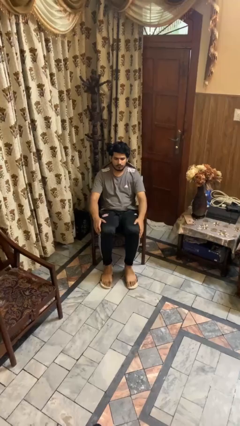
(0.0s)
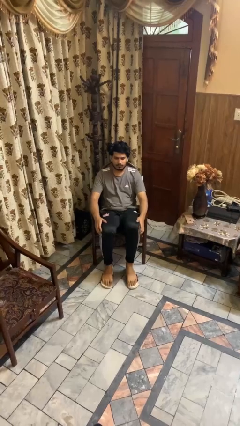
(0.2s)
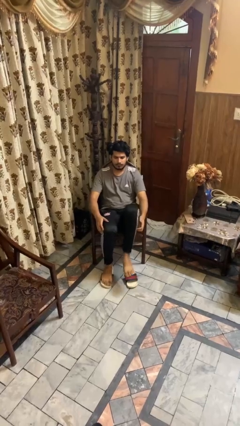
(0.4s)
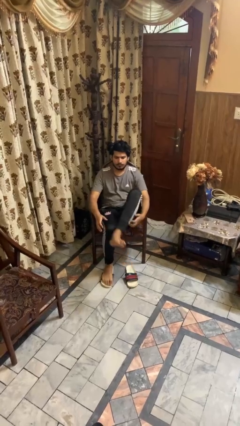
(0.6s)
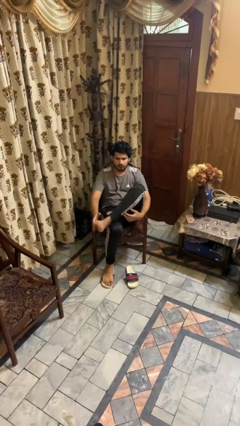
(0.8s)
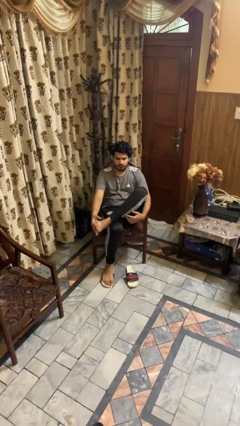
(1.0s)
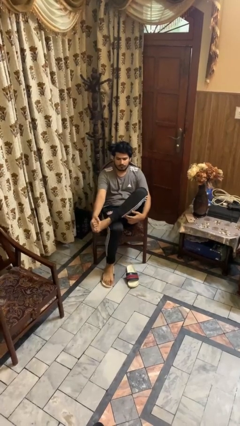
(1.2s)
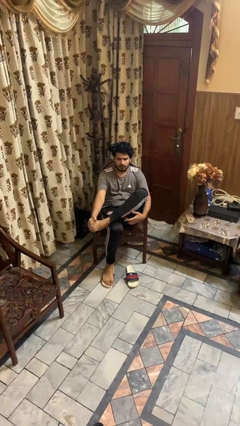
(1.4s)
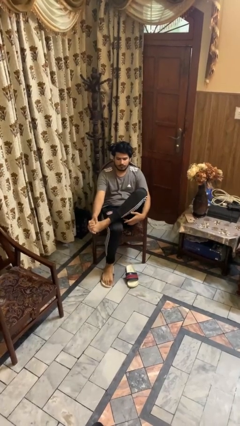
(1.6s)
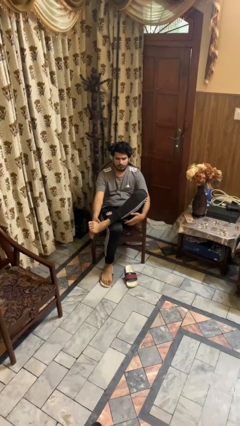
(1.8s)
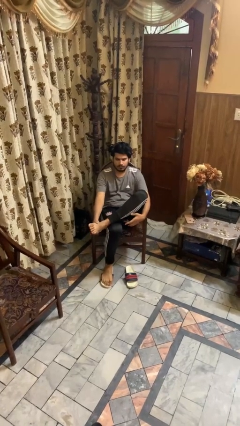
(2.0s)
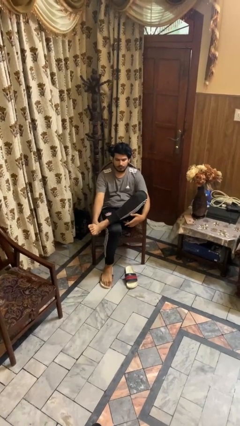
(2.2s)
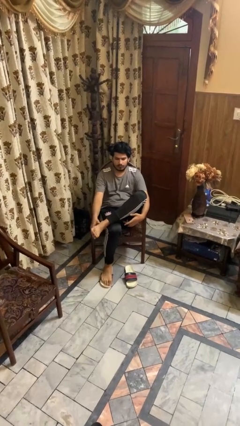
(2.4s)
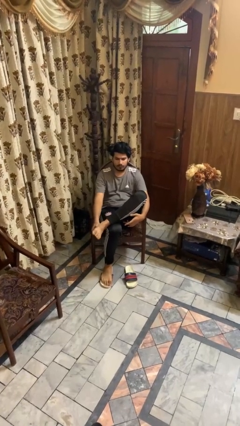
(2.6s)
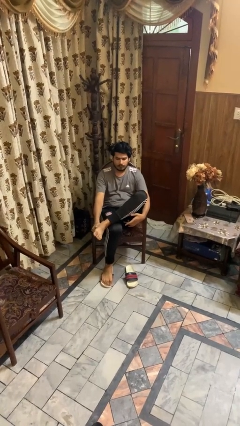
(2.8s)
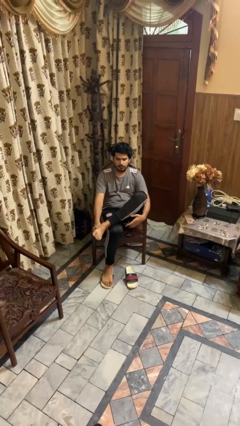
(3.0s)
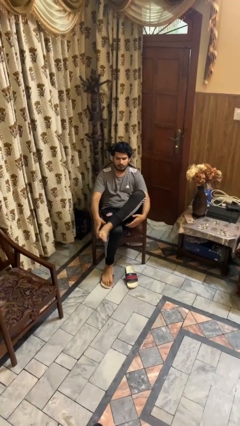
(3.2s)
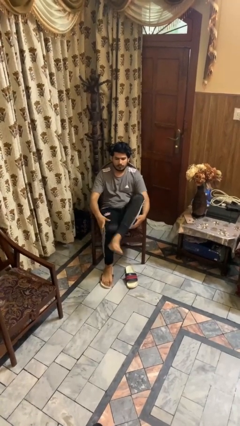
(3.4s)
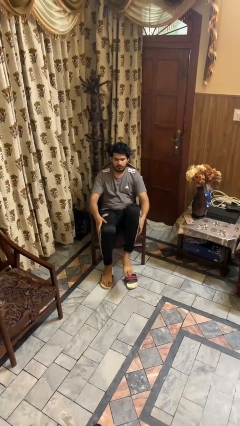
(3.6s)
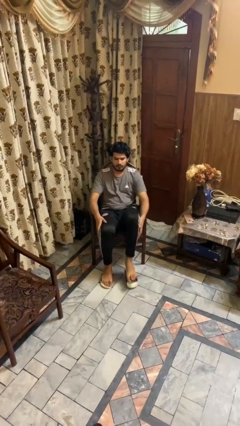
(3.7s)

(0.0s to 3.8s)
person rubs foot

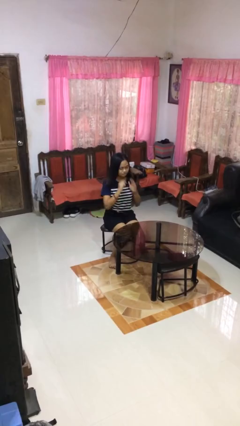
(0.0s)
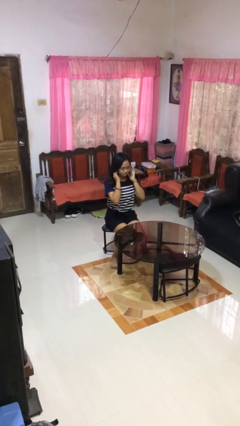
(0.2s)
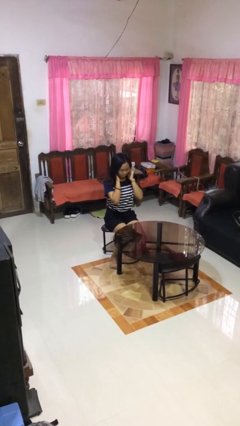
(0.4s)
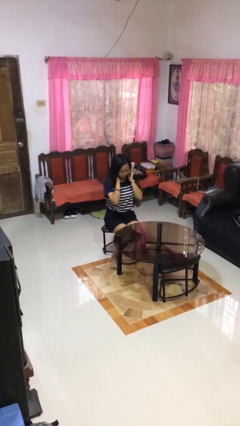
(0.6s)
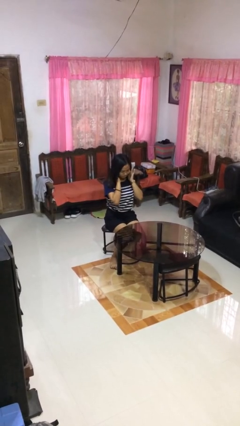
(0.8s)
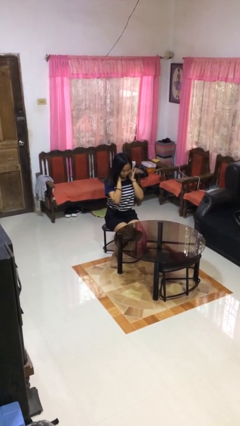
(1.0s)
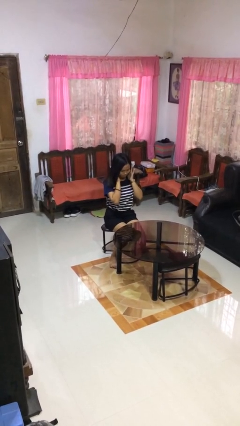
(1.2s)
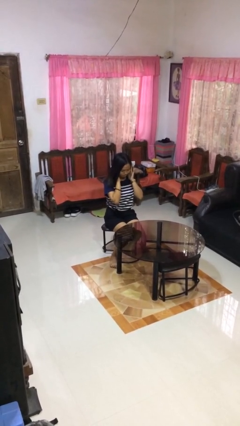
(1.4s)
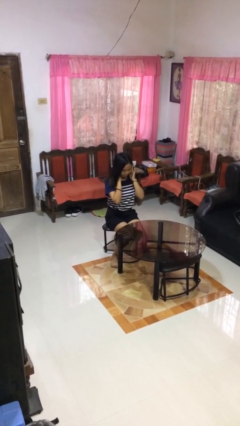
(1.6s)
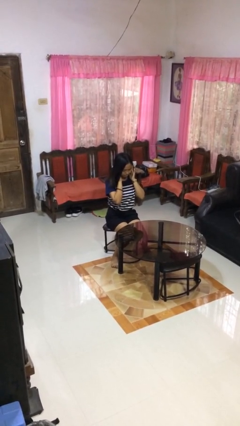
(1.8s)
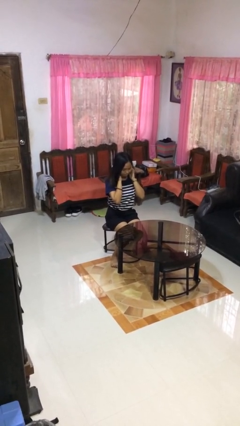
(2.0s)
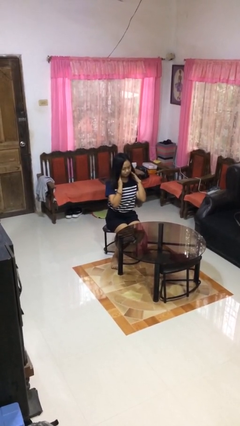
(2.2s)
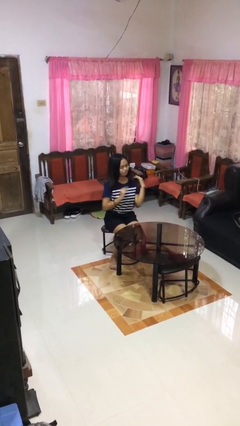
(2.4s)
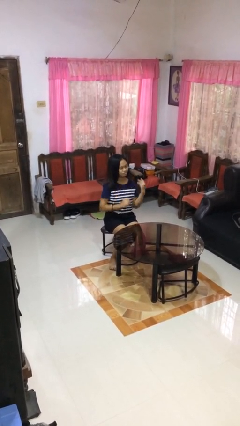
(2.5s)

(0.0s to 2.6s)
person puts fingers in ear

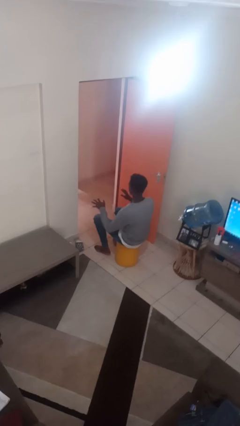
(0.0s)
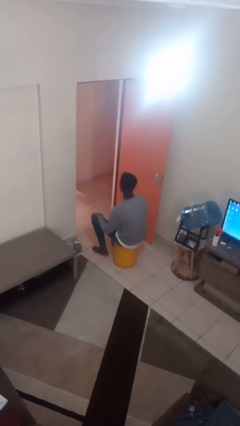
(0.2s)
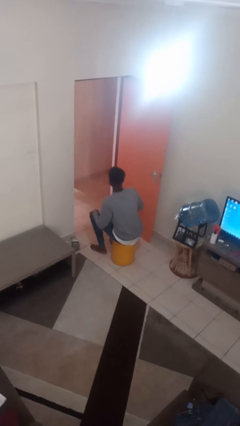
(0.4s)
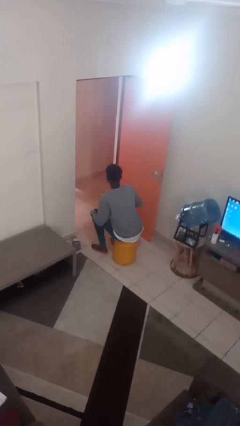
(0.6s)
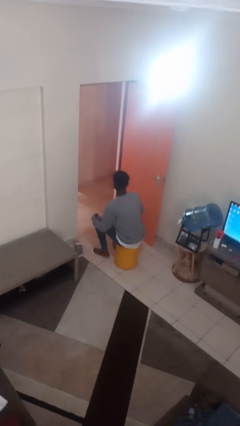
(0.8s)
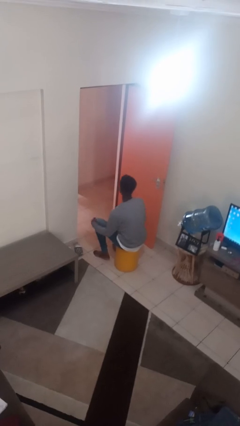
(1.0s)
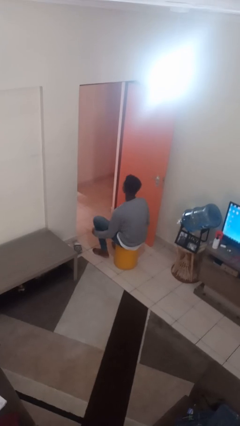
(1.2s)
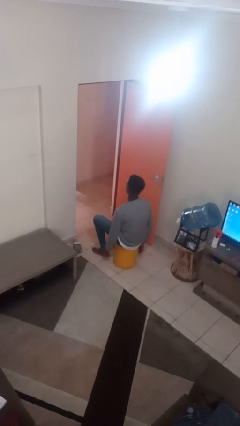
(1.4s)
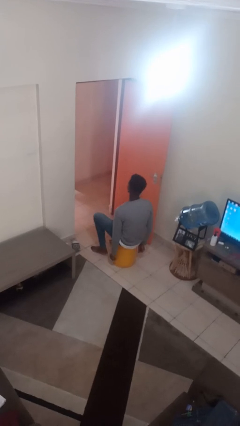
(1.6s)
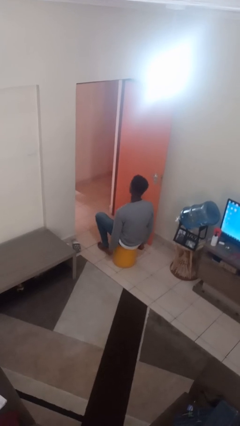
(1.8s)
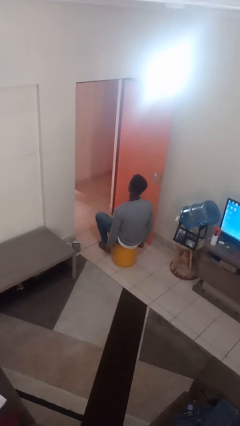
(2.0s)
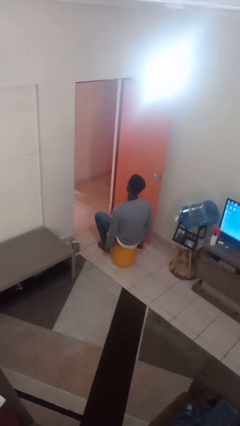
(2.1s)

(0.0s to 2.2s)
person slaps hands on thighs

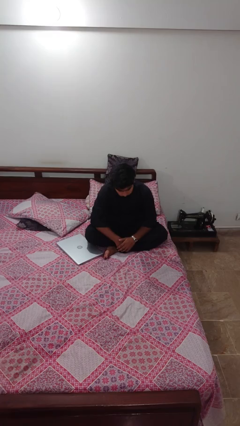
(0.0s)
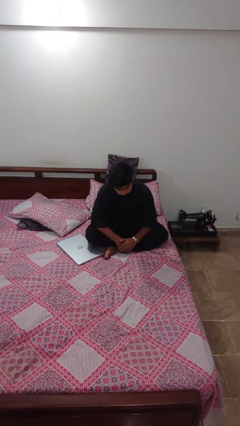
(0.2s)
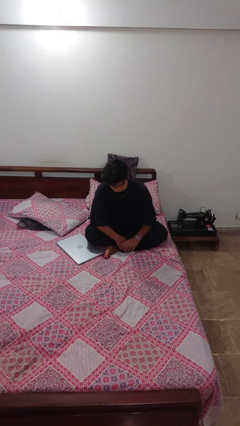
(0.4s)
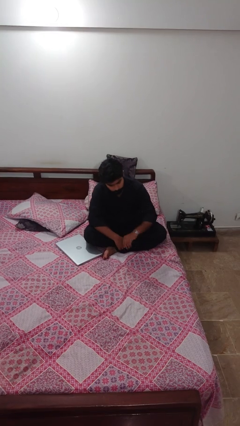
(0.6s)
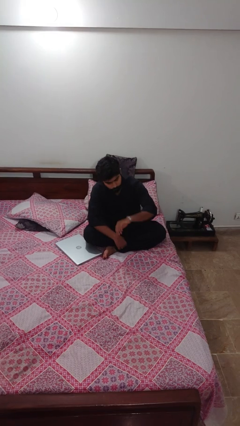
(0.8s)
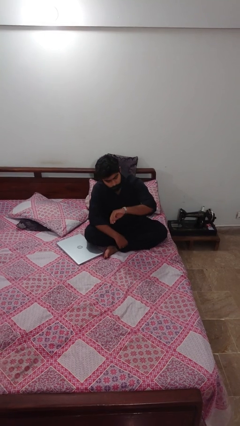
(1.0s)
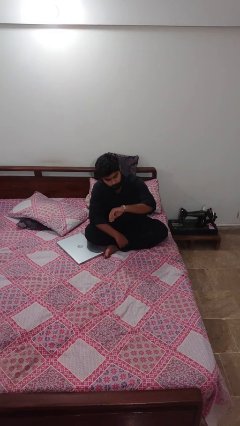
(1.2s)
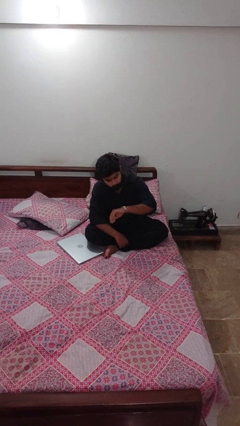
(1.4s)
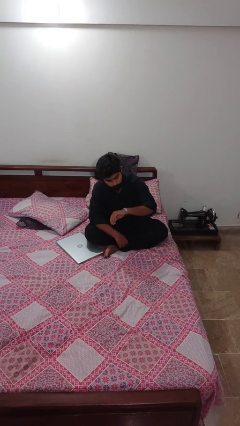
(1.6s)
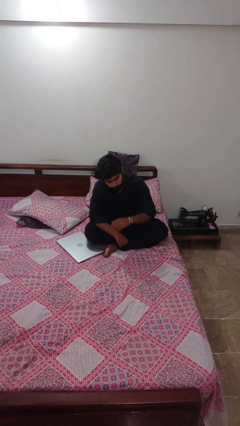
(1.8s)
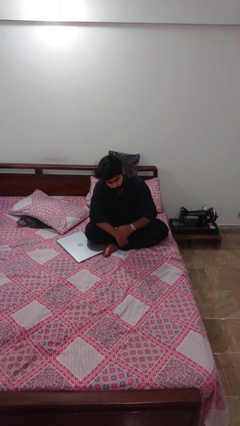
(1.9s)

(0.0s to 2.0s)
person looks at wristwatch

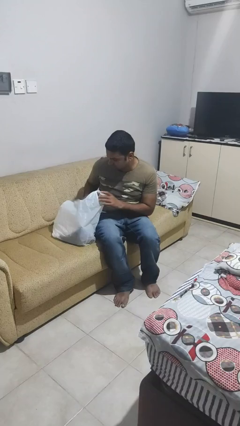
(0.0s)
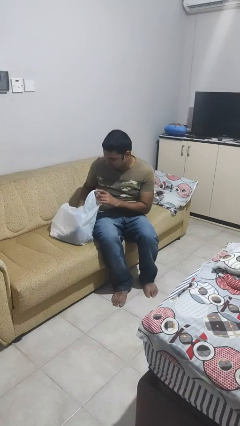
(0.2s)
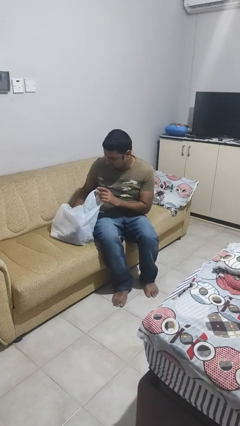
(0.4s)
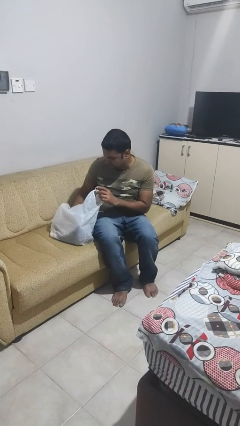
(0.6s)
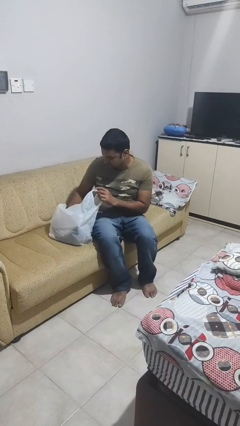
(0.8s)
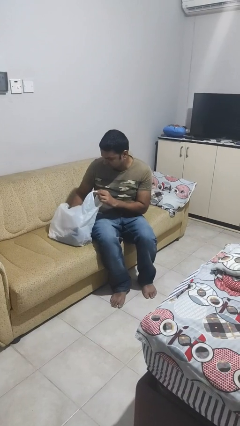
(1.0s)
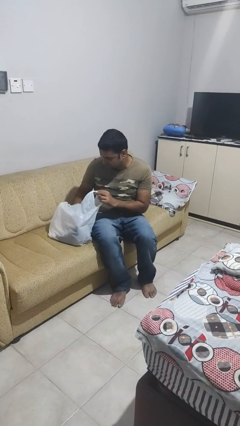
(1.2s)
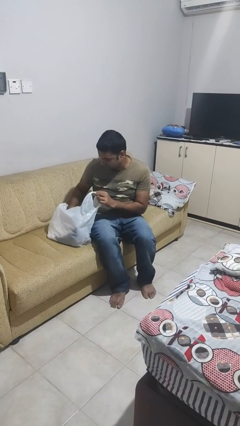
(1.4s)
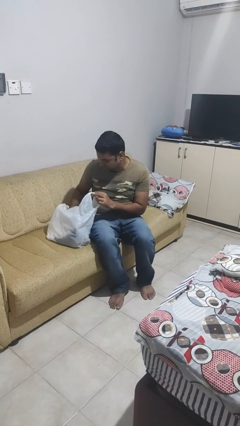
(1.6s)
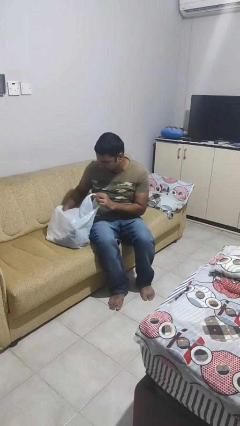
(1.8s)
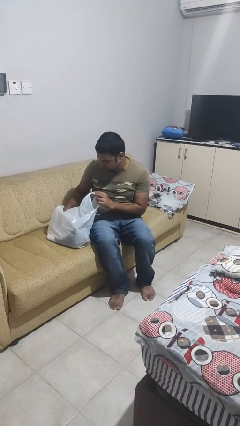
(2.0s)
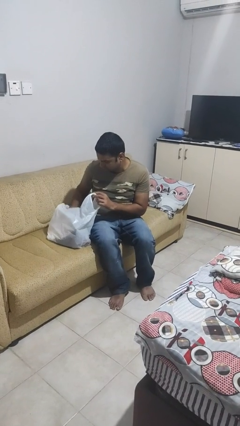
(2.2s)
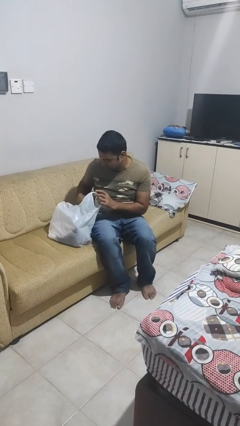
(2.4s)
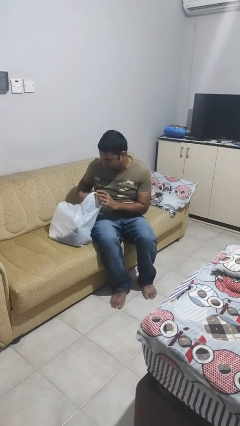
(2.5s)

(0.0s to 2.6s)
person searches in bag

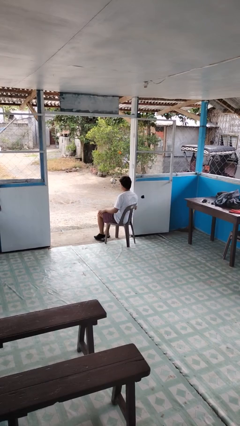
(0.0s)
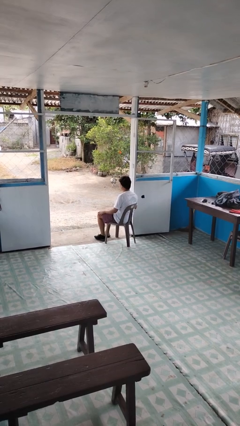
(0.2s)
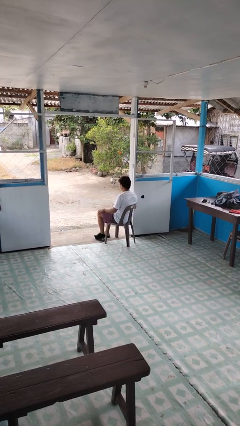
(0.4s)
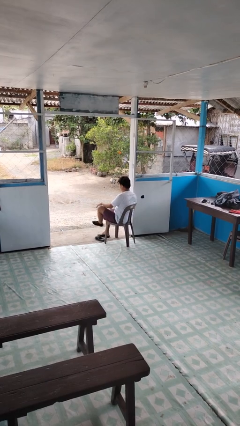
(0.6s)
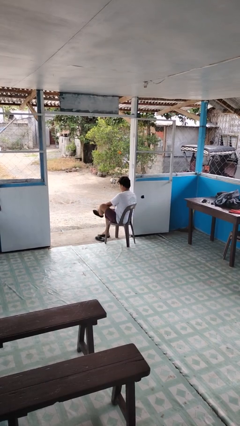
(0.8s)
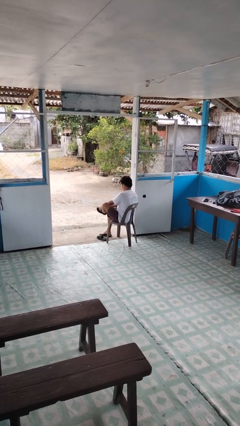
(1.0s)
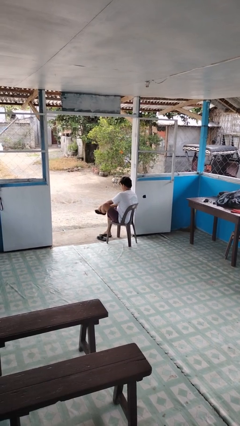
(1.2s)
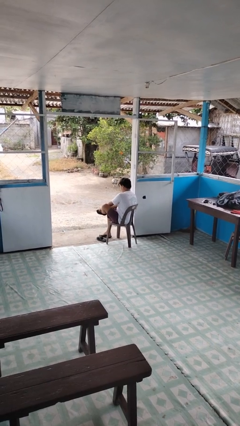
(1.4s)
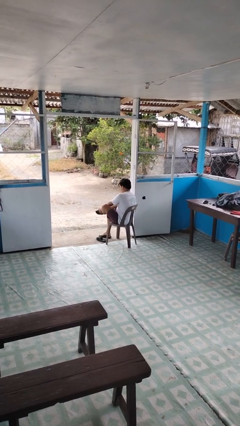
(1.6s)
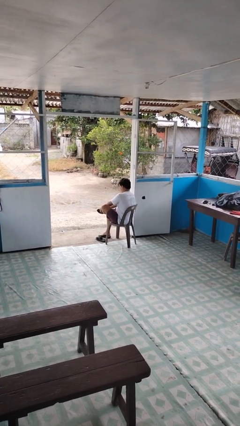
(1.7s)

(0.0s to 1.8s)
person takes off socks

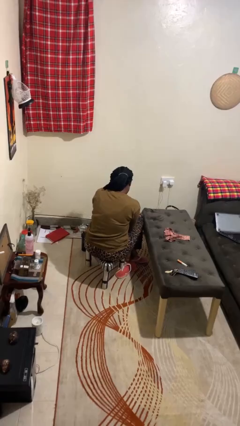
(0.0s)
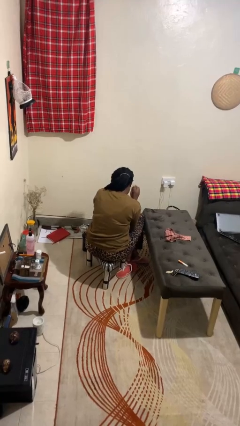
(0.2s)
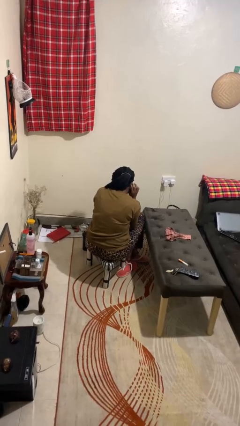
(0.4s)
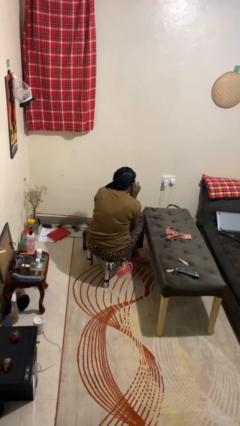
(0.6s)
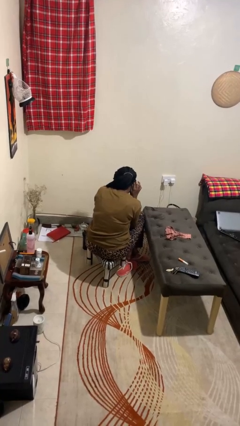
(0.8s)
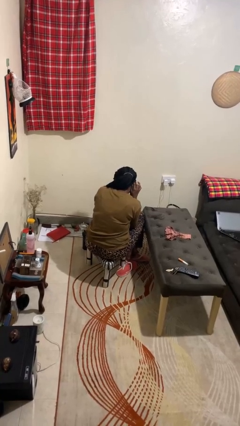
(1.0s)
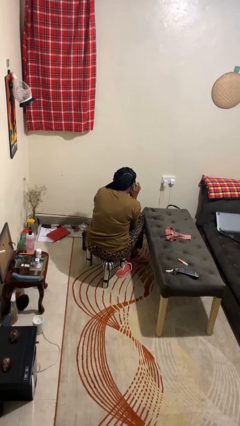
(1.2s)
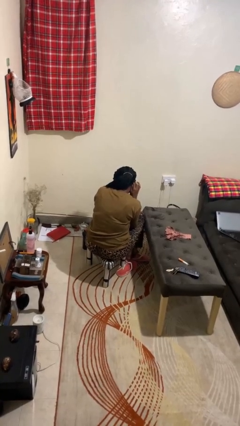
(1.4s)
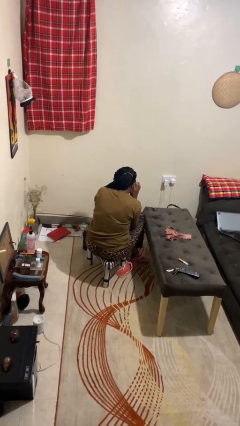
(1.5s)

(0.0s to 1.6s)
person gestures listen closely

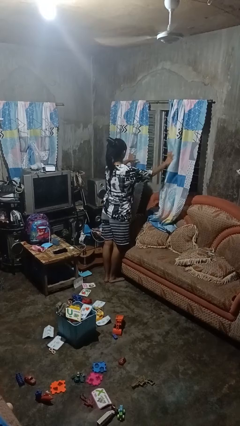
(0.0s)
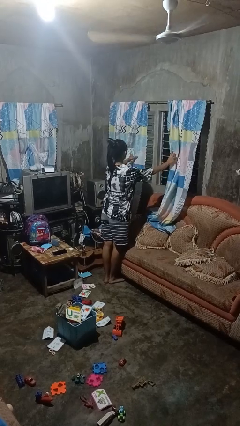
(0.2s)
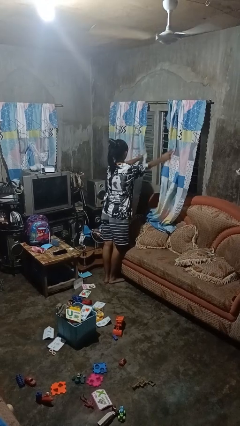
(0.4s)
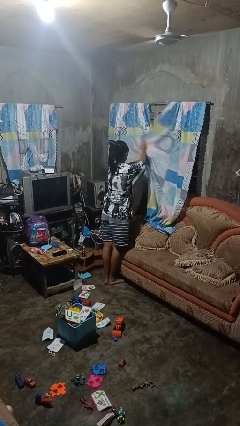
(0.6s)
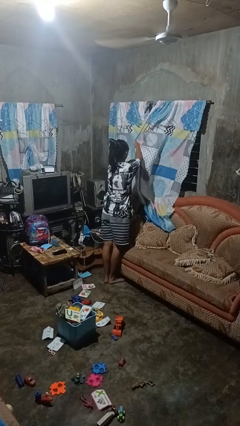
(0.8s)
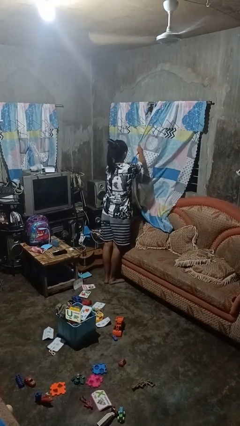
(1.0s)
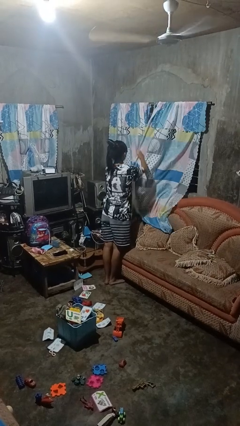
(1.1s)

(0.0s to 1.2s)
person closes curtains
